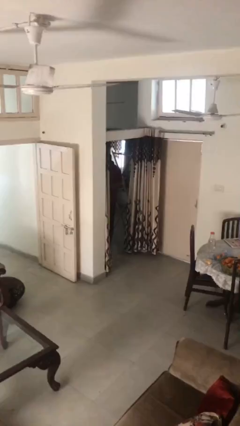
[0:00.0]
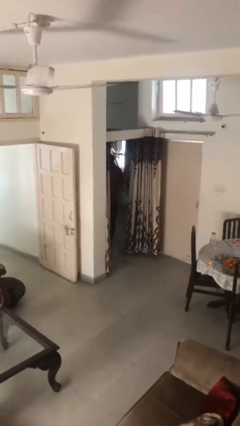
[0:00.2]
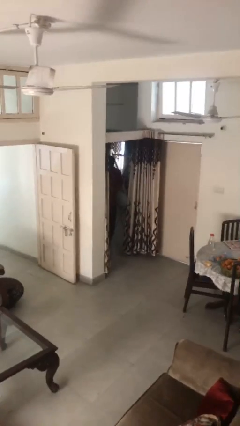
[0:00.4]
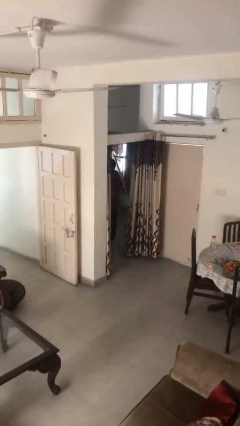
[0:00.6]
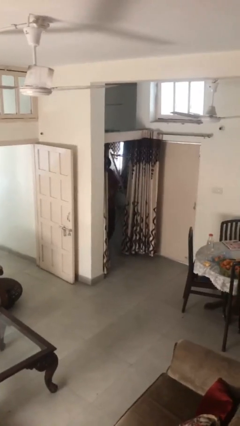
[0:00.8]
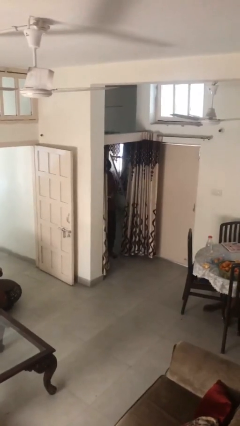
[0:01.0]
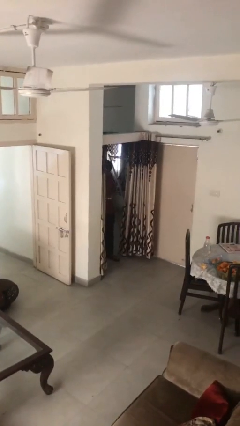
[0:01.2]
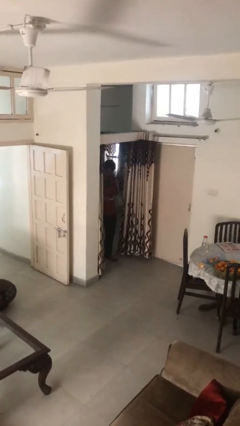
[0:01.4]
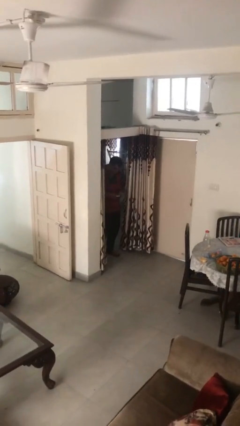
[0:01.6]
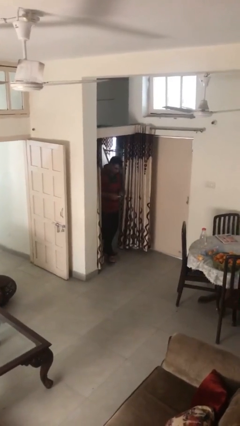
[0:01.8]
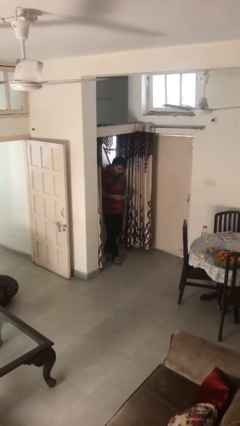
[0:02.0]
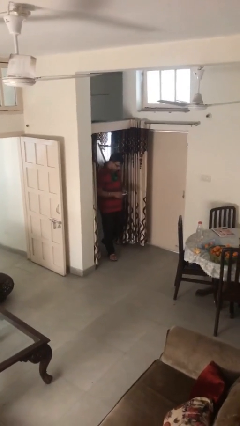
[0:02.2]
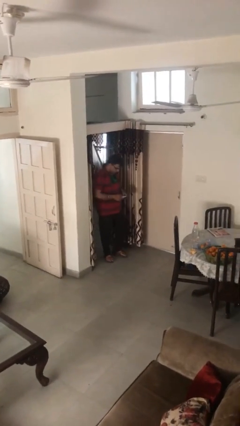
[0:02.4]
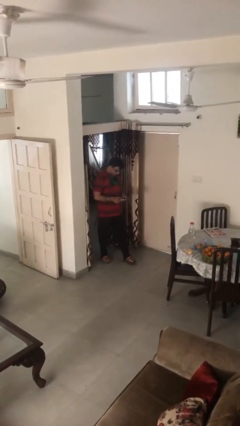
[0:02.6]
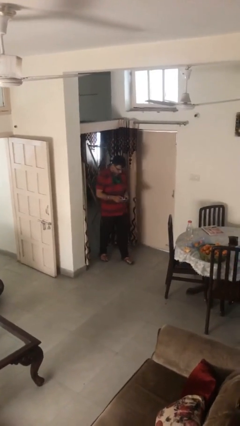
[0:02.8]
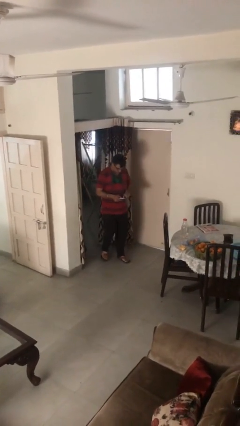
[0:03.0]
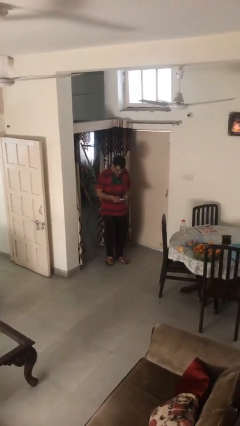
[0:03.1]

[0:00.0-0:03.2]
person enters scene through structure

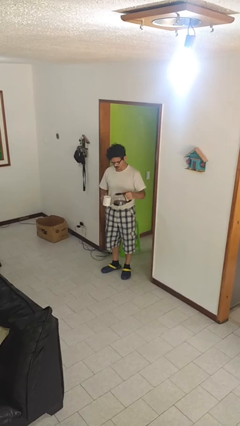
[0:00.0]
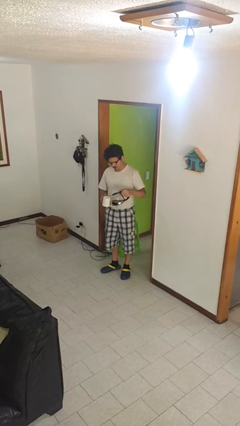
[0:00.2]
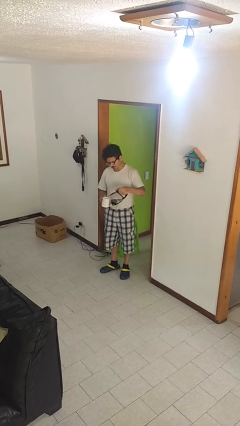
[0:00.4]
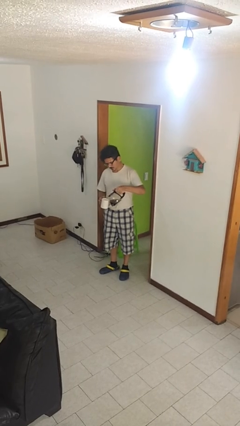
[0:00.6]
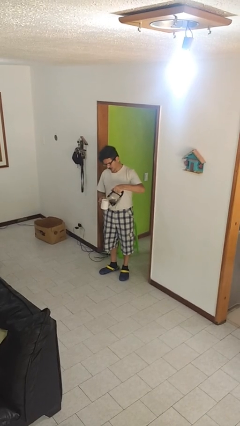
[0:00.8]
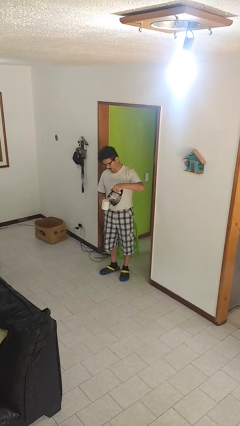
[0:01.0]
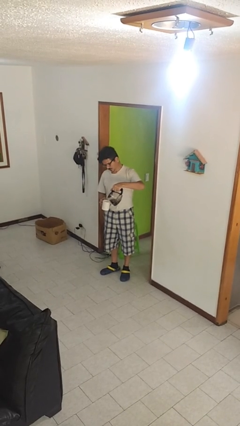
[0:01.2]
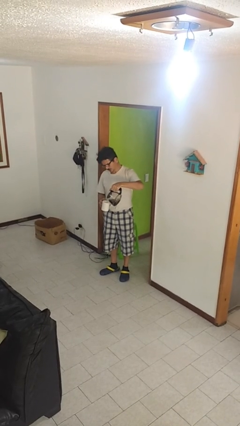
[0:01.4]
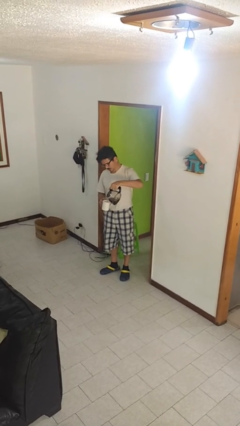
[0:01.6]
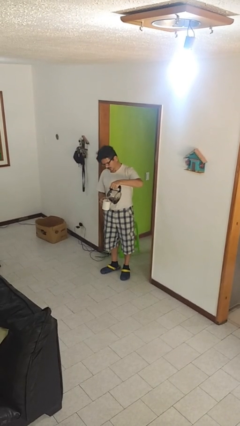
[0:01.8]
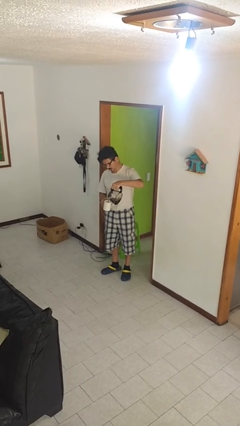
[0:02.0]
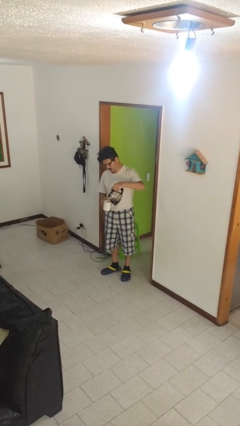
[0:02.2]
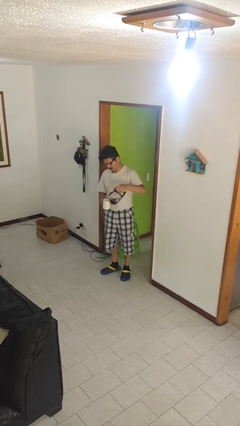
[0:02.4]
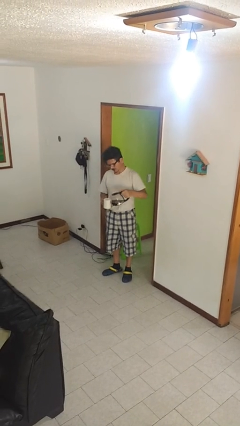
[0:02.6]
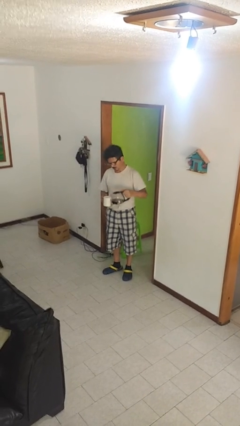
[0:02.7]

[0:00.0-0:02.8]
person pours coffee into mug

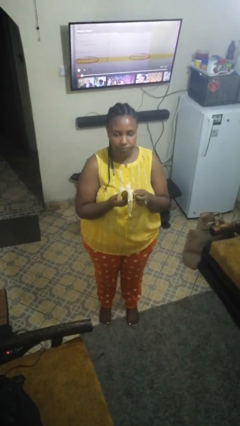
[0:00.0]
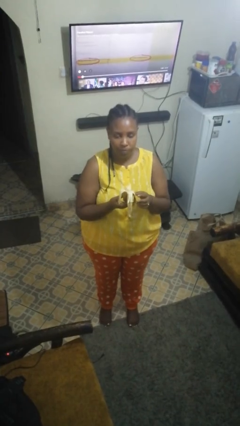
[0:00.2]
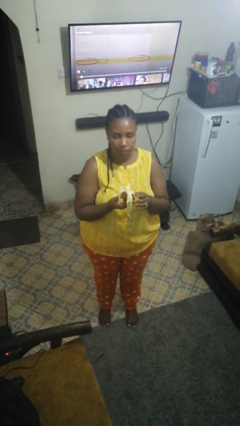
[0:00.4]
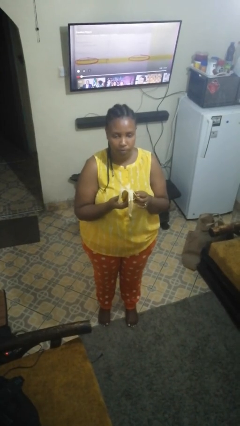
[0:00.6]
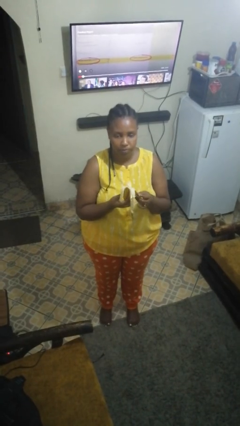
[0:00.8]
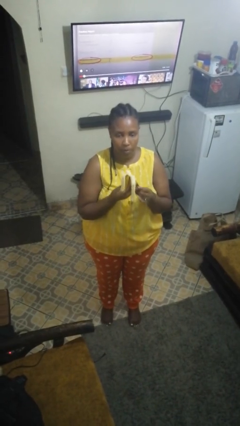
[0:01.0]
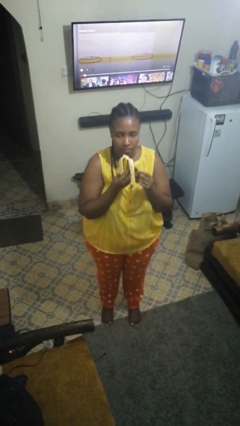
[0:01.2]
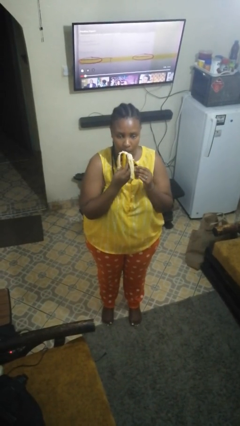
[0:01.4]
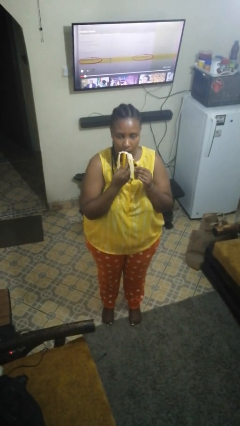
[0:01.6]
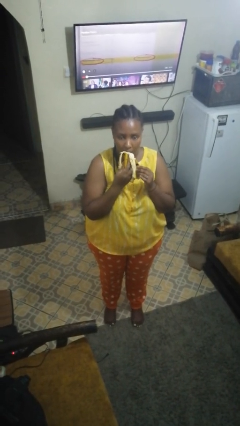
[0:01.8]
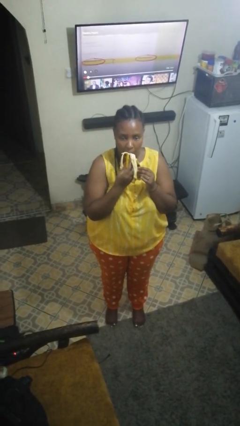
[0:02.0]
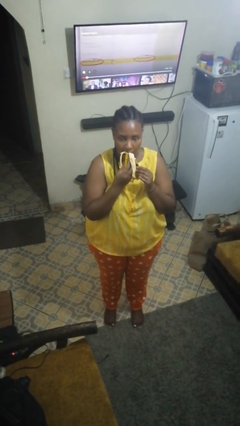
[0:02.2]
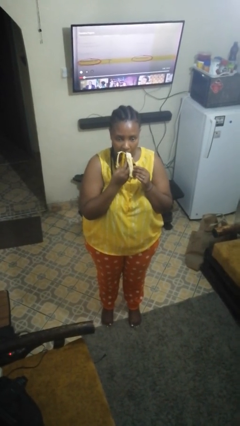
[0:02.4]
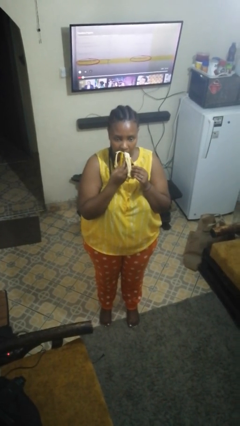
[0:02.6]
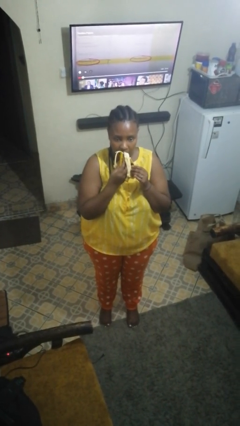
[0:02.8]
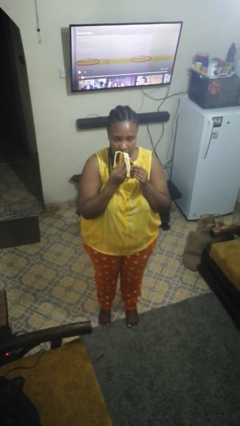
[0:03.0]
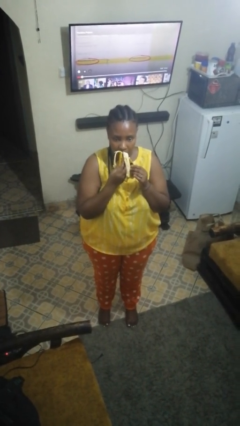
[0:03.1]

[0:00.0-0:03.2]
person eats banana

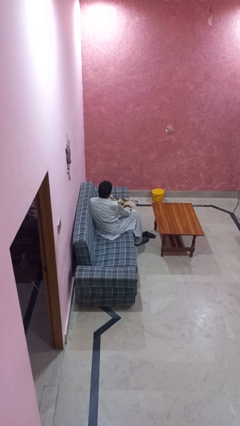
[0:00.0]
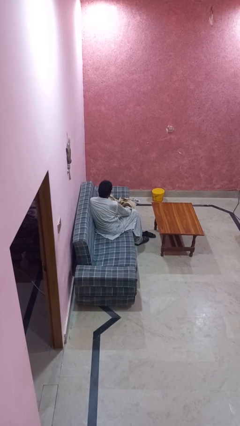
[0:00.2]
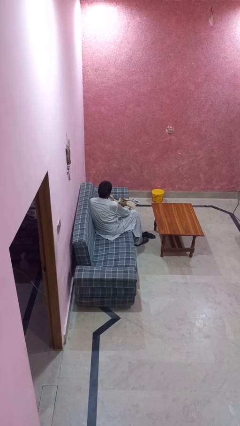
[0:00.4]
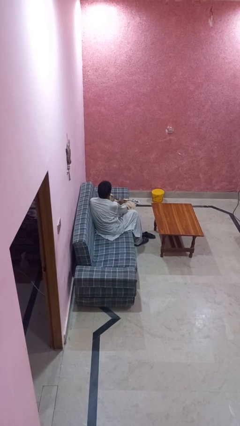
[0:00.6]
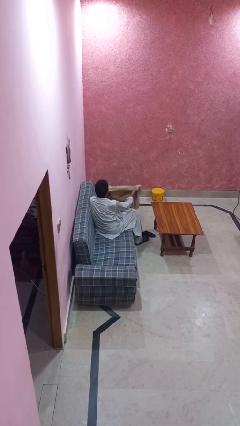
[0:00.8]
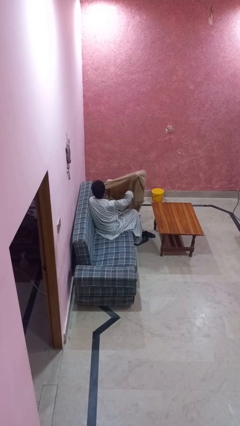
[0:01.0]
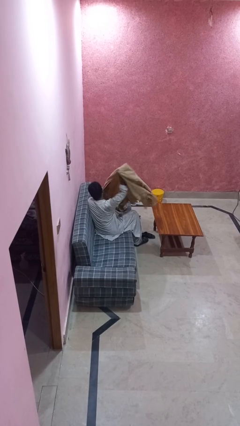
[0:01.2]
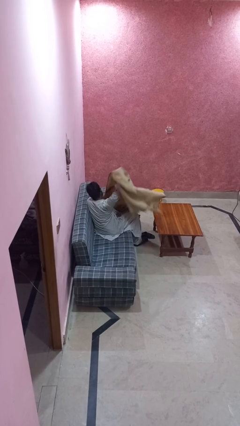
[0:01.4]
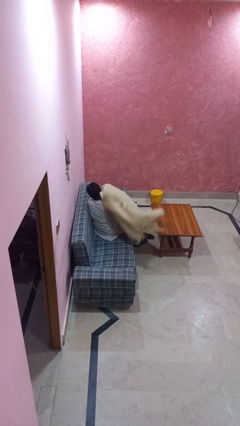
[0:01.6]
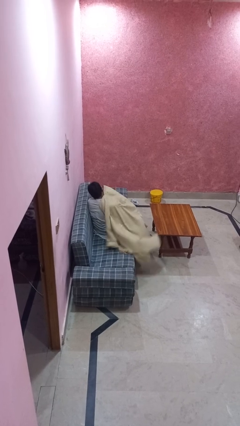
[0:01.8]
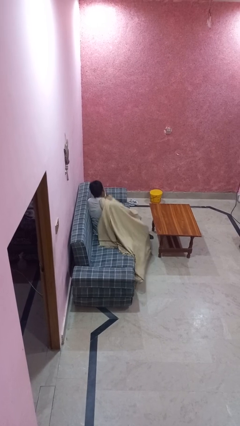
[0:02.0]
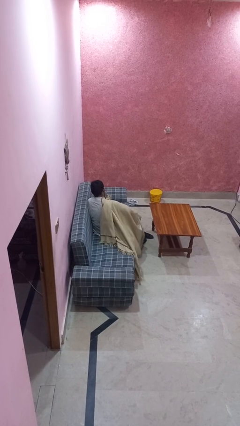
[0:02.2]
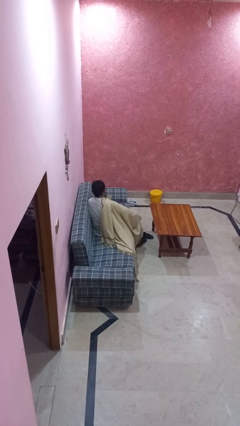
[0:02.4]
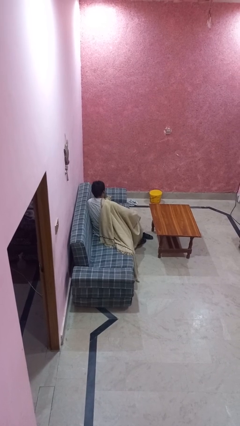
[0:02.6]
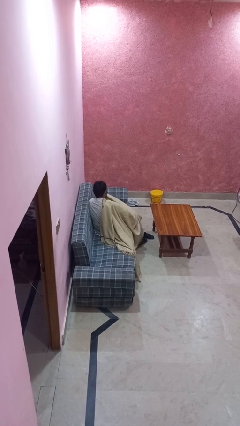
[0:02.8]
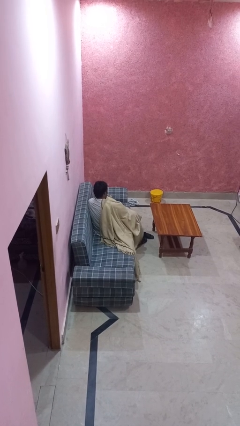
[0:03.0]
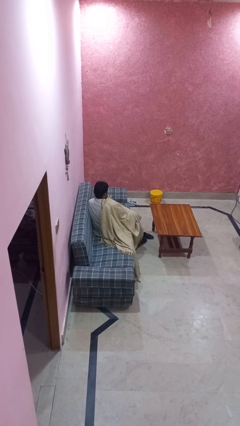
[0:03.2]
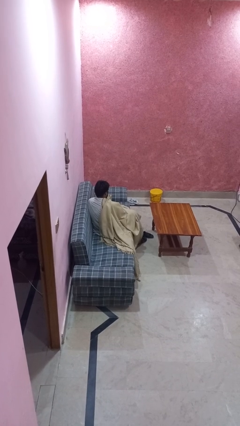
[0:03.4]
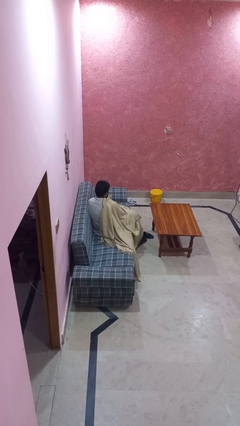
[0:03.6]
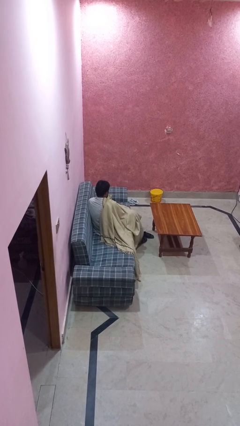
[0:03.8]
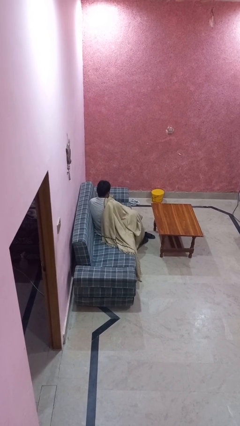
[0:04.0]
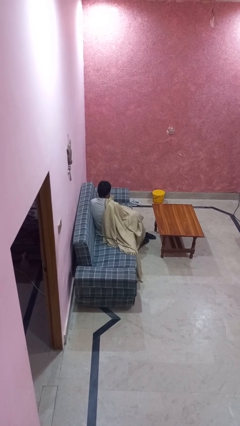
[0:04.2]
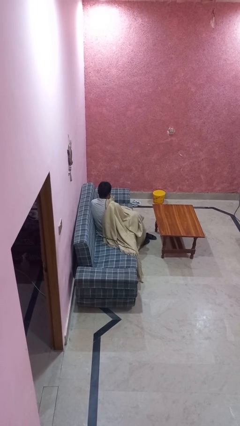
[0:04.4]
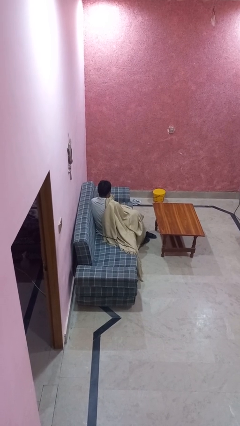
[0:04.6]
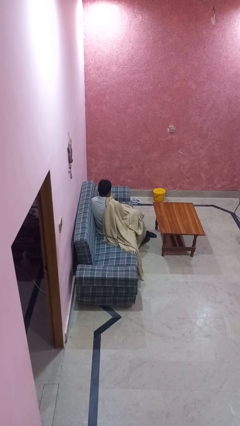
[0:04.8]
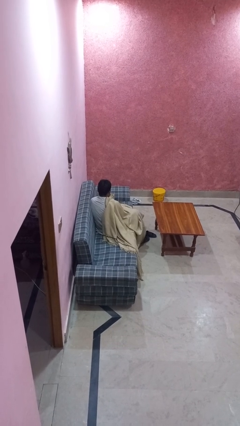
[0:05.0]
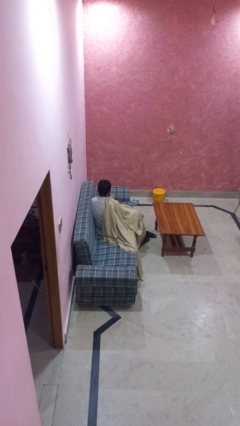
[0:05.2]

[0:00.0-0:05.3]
person covers with blanket

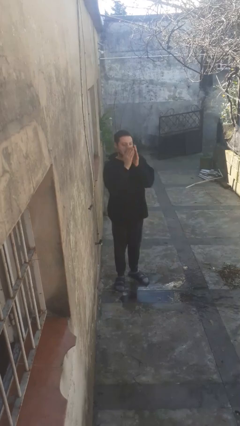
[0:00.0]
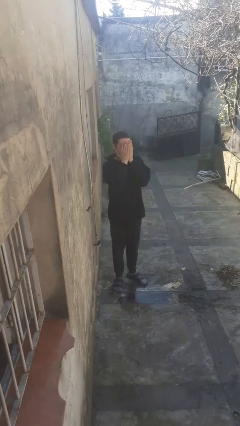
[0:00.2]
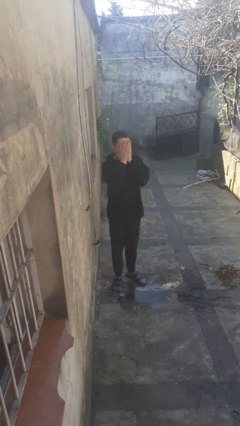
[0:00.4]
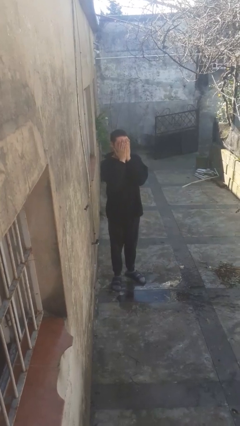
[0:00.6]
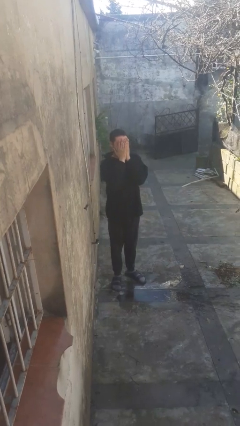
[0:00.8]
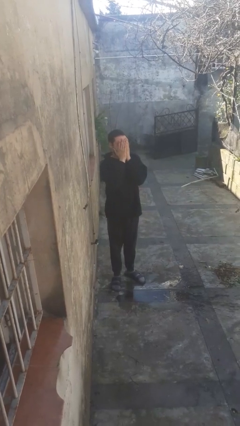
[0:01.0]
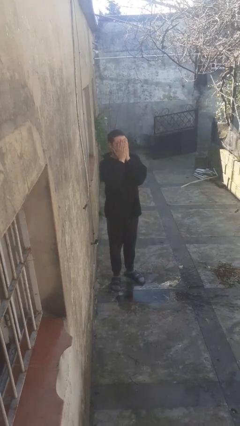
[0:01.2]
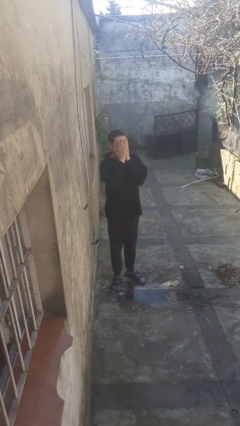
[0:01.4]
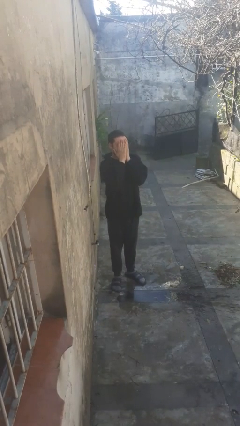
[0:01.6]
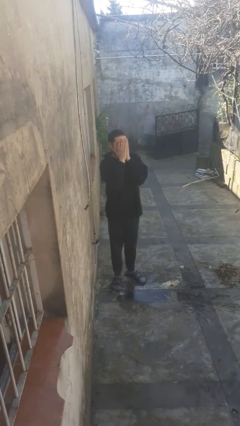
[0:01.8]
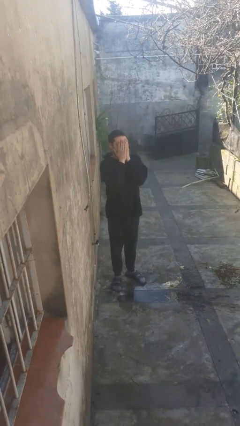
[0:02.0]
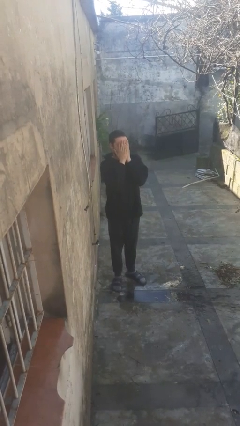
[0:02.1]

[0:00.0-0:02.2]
person covers face with hands

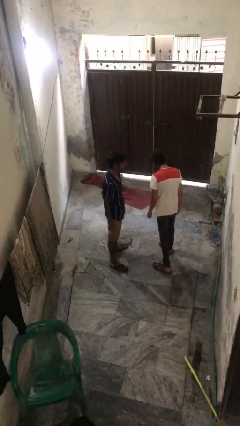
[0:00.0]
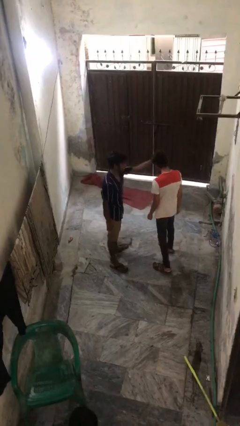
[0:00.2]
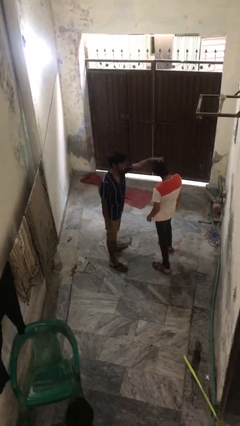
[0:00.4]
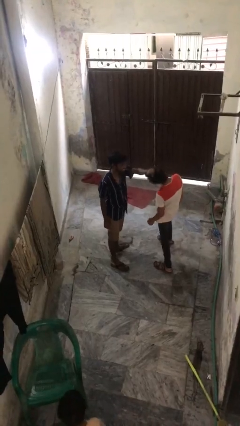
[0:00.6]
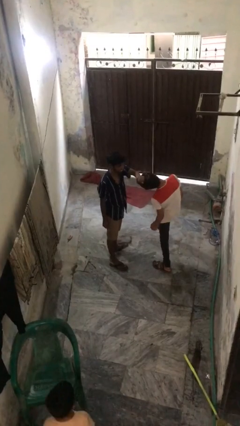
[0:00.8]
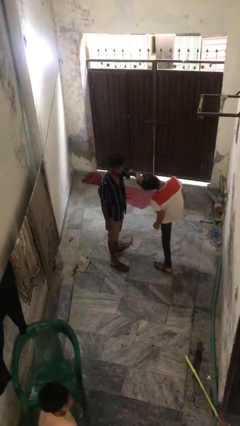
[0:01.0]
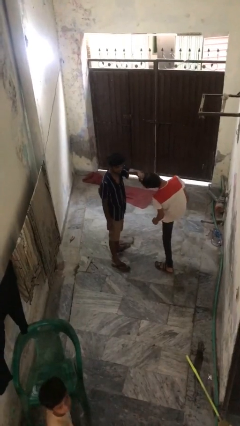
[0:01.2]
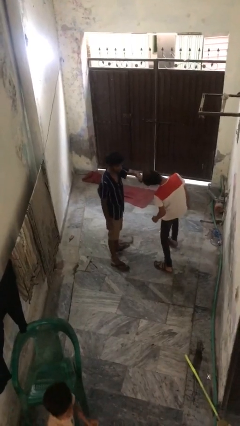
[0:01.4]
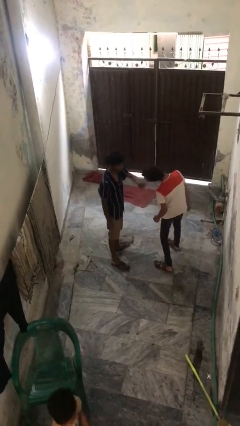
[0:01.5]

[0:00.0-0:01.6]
person grabs person by hair
